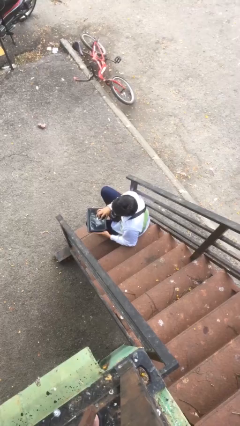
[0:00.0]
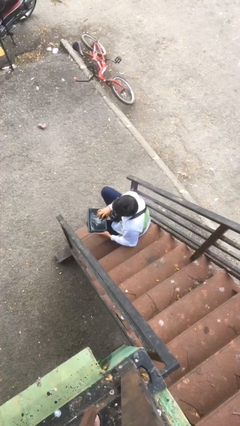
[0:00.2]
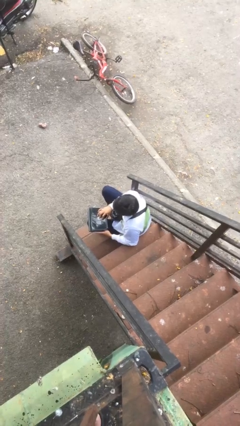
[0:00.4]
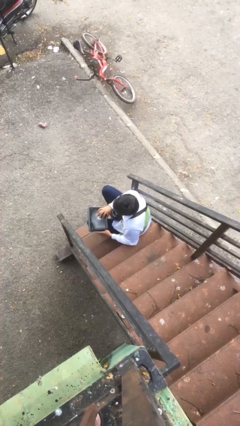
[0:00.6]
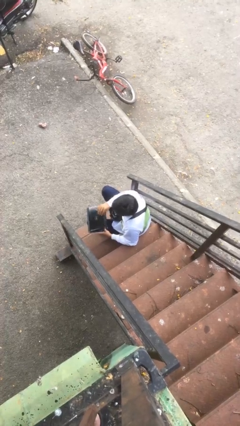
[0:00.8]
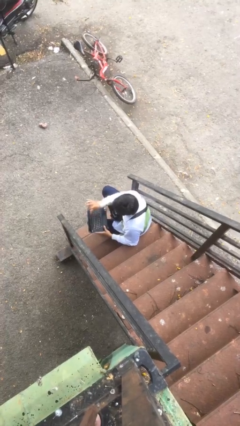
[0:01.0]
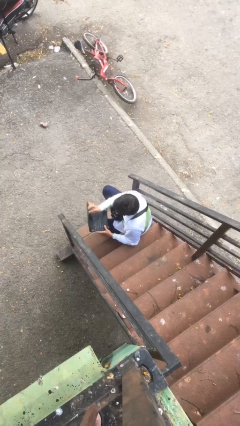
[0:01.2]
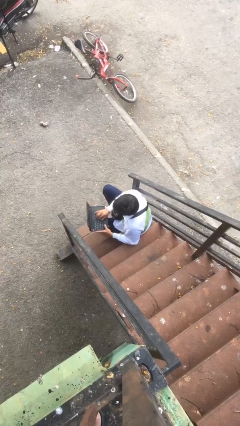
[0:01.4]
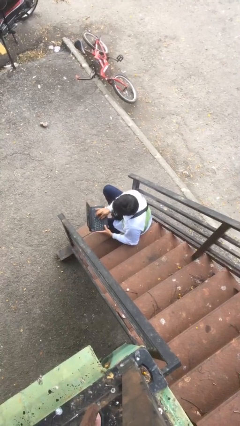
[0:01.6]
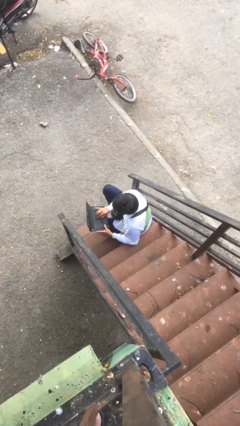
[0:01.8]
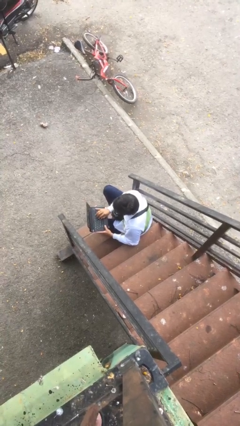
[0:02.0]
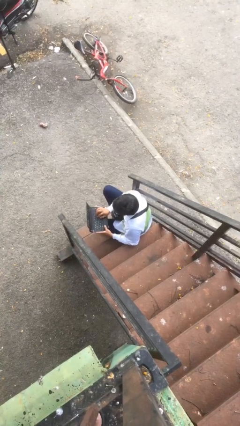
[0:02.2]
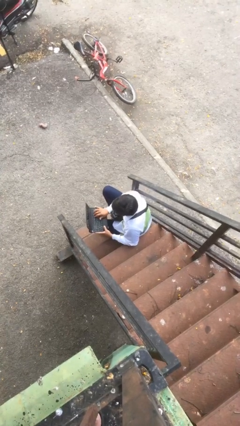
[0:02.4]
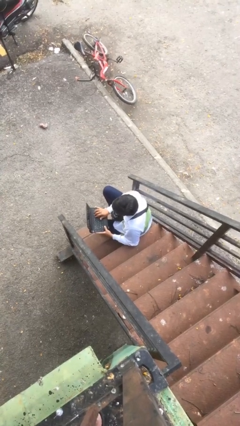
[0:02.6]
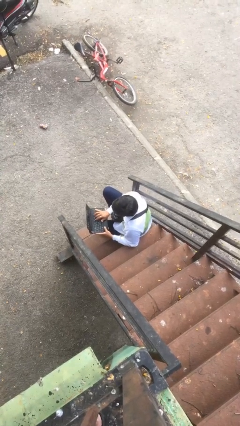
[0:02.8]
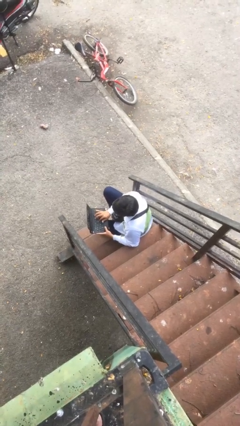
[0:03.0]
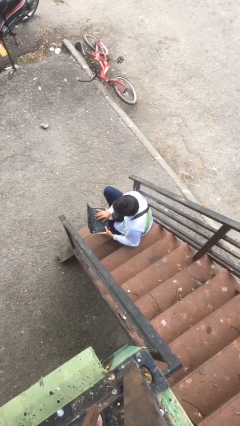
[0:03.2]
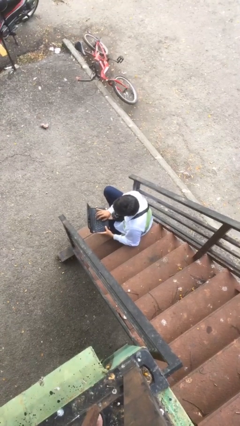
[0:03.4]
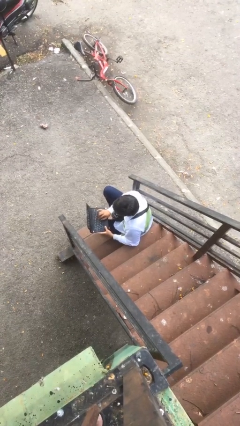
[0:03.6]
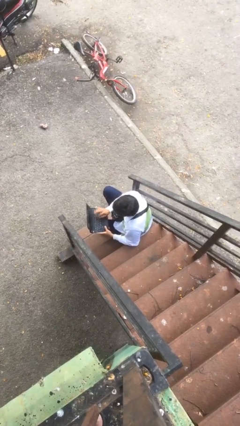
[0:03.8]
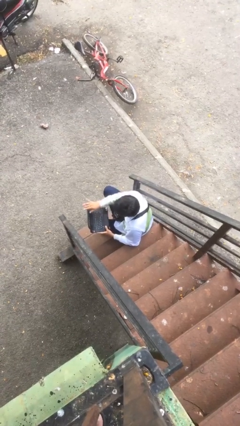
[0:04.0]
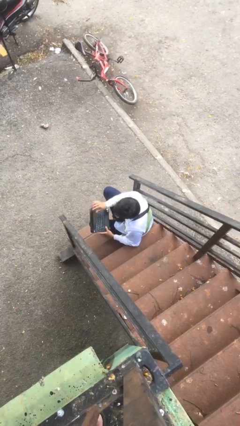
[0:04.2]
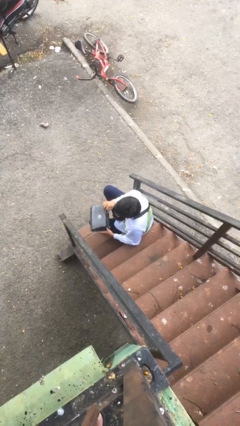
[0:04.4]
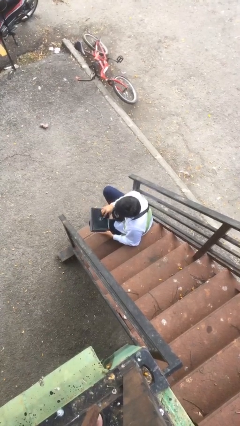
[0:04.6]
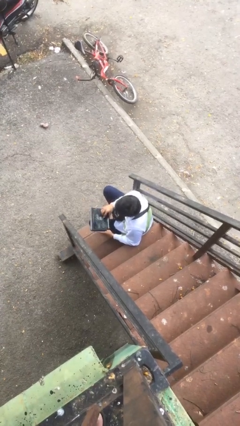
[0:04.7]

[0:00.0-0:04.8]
person interacts with laptop

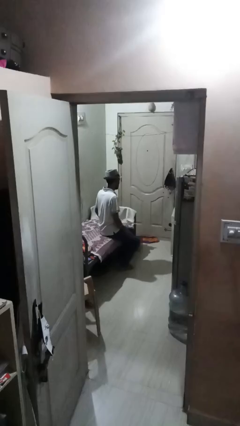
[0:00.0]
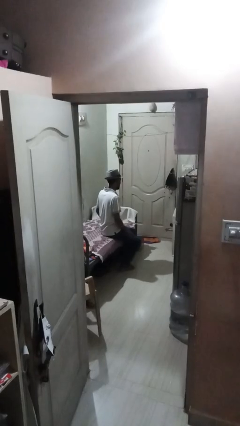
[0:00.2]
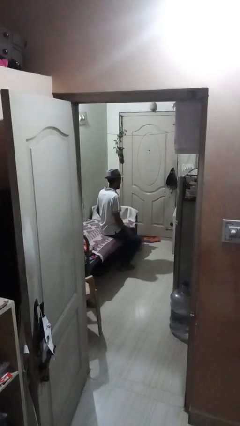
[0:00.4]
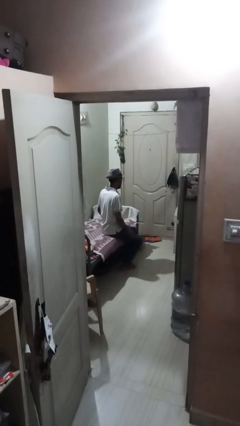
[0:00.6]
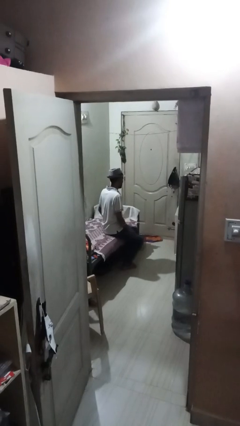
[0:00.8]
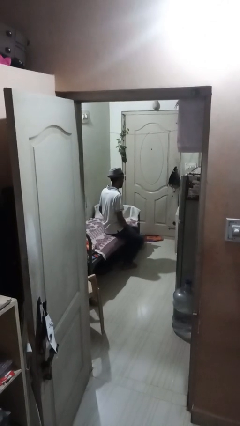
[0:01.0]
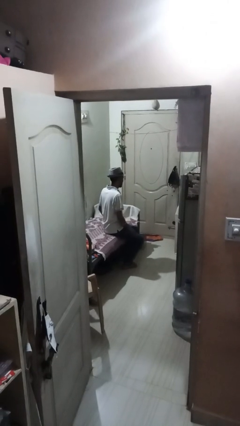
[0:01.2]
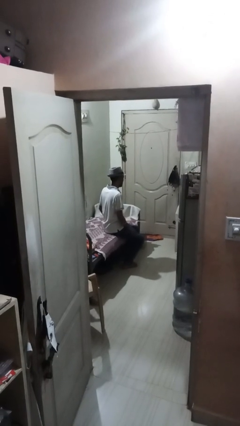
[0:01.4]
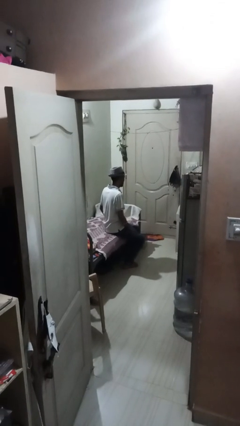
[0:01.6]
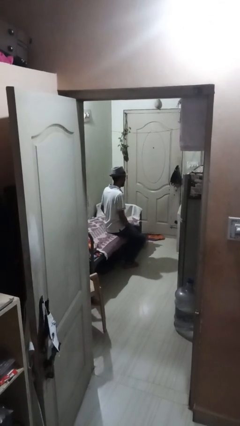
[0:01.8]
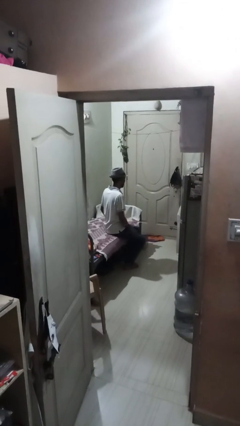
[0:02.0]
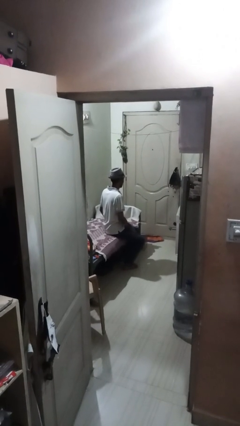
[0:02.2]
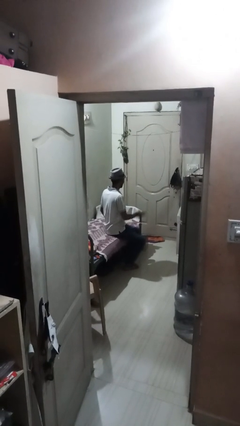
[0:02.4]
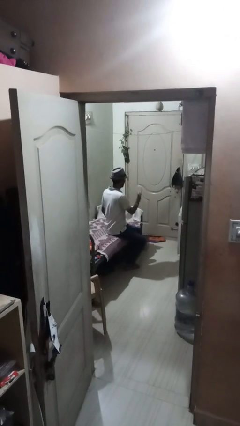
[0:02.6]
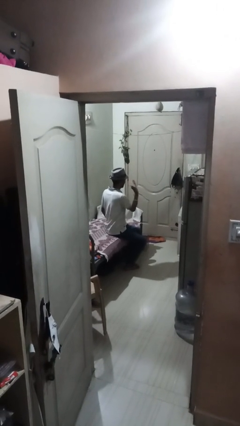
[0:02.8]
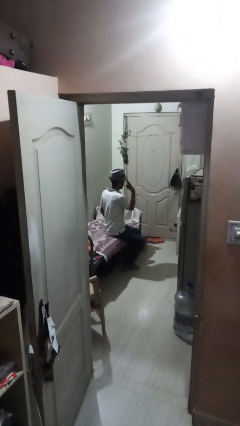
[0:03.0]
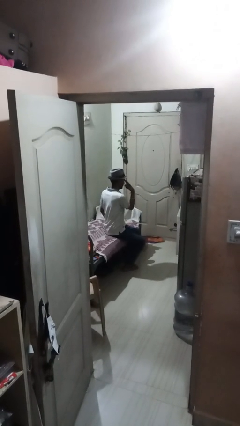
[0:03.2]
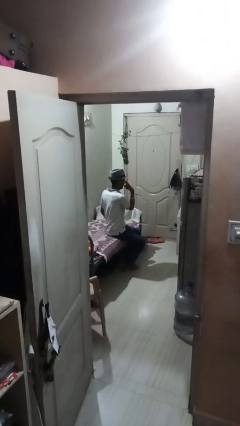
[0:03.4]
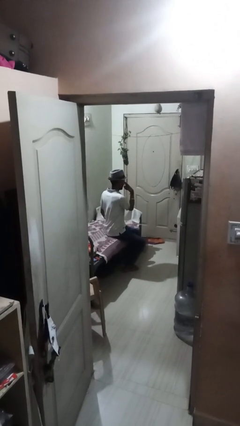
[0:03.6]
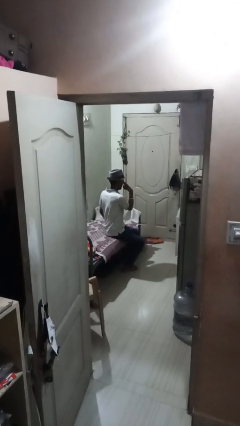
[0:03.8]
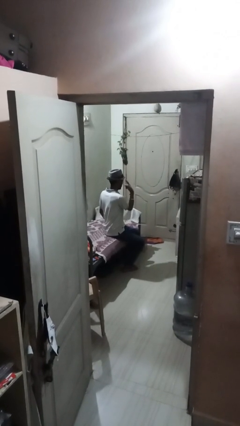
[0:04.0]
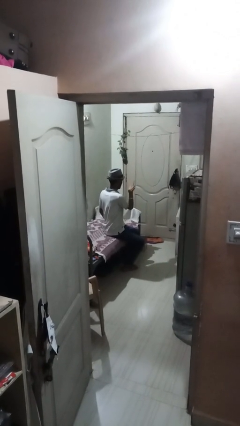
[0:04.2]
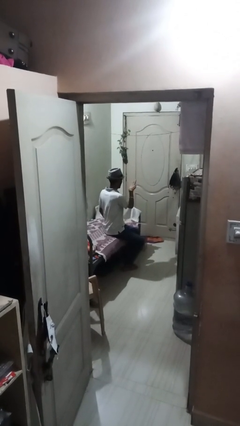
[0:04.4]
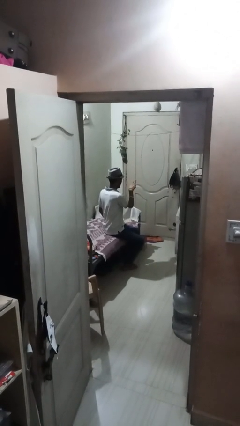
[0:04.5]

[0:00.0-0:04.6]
person gestures watch closely

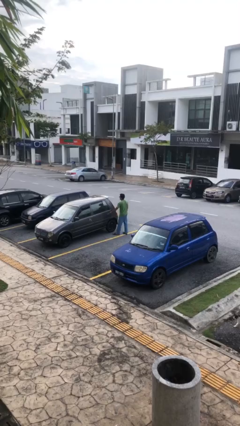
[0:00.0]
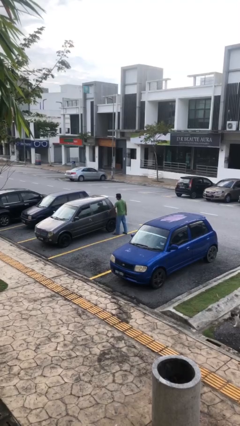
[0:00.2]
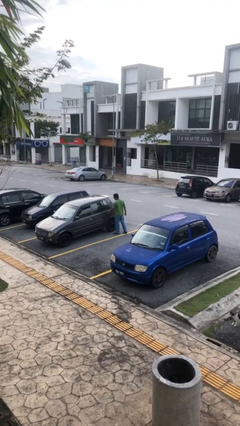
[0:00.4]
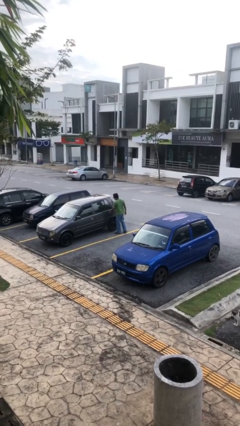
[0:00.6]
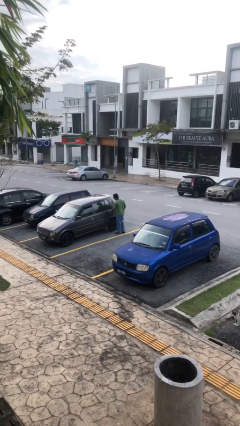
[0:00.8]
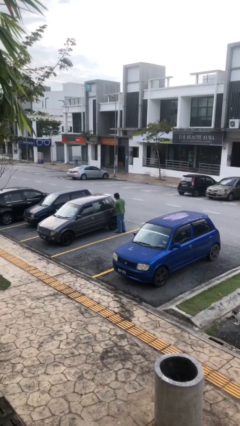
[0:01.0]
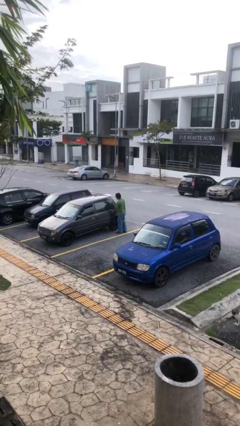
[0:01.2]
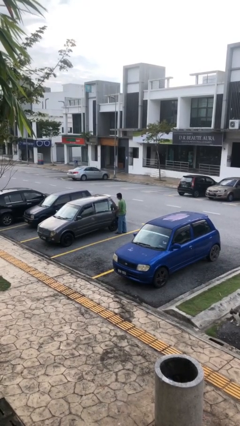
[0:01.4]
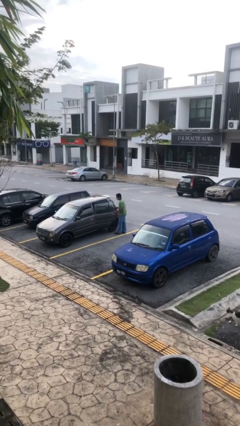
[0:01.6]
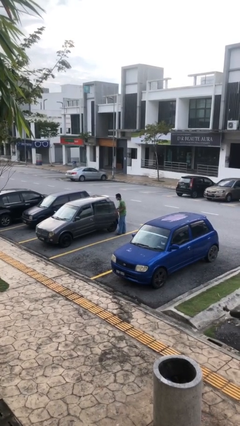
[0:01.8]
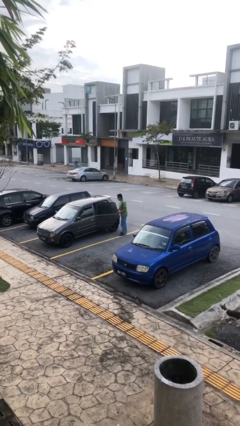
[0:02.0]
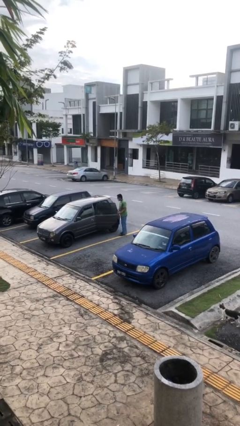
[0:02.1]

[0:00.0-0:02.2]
person opens car door

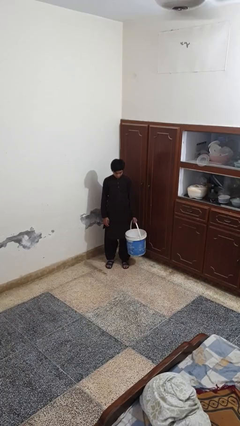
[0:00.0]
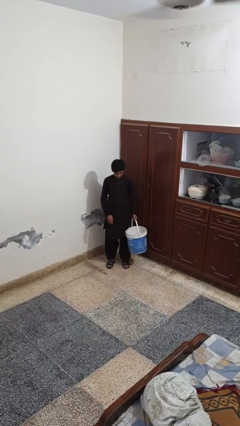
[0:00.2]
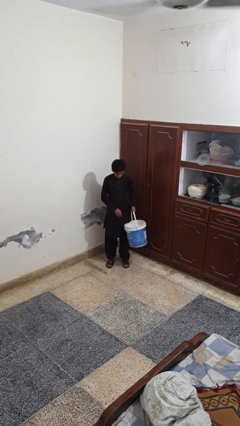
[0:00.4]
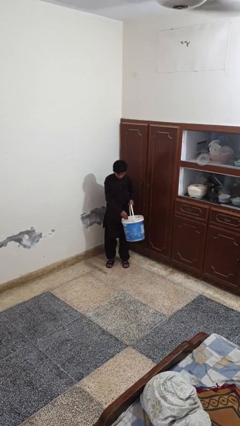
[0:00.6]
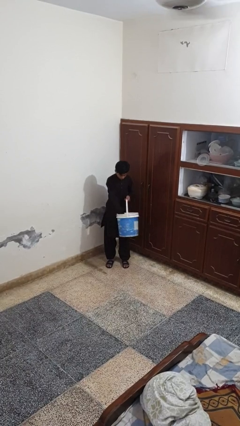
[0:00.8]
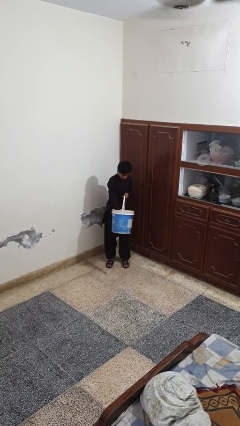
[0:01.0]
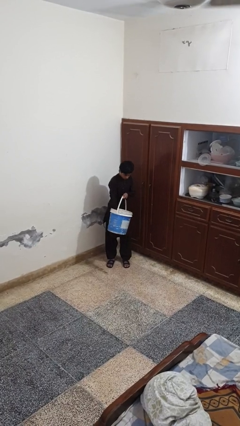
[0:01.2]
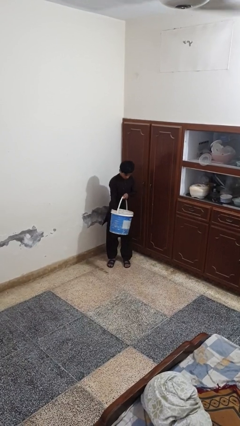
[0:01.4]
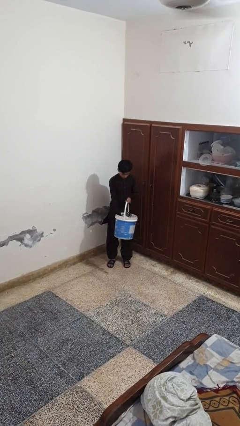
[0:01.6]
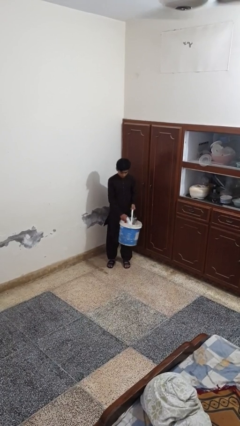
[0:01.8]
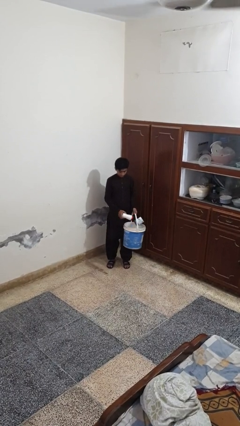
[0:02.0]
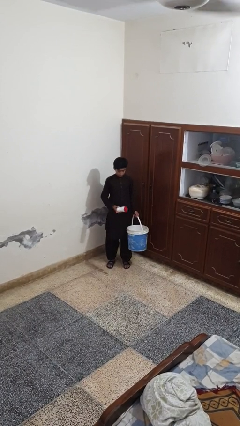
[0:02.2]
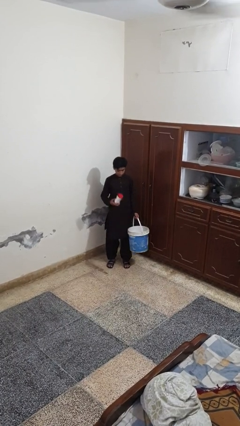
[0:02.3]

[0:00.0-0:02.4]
person takes object from basket

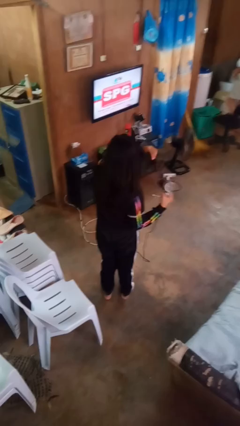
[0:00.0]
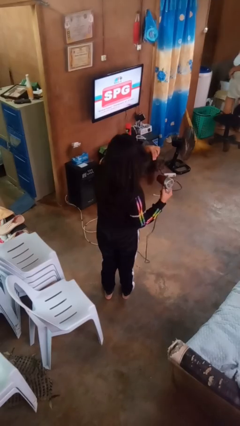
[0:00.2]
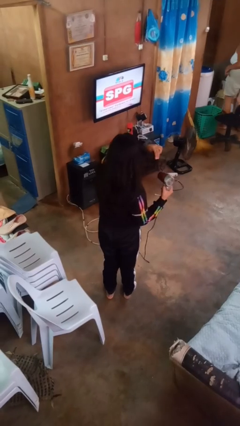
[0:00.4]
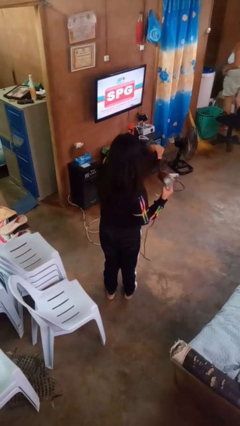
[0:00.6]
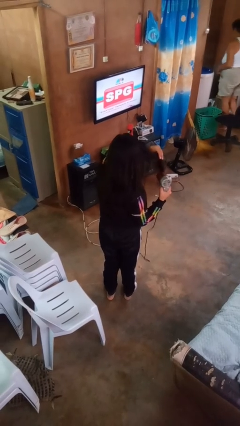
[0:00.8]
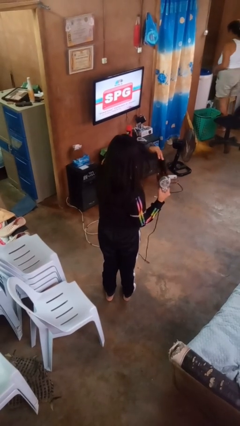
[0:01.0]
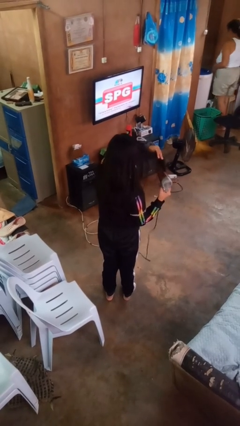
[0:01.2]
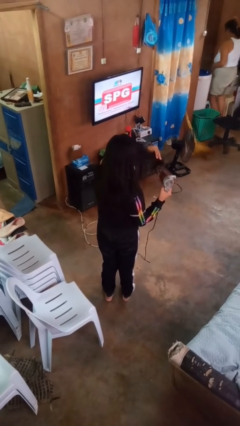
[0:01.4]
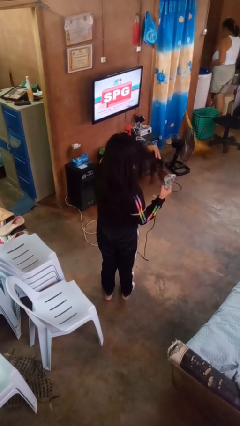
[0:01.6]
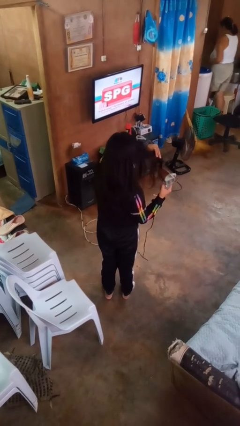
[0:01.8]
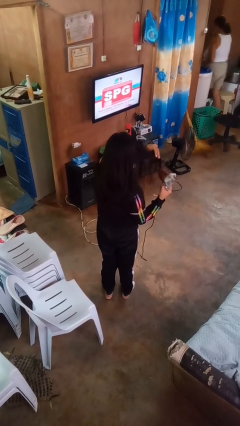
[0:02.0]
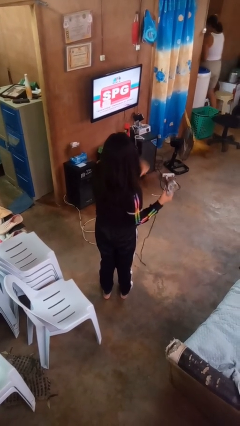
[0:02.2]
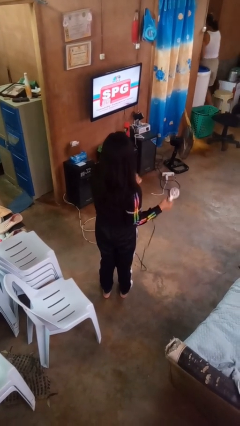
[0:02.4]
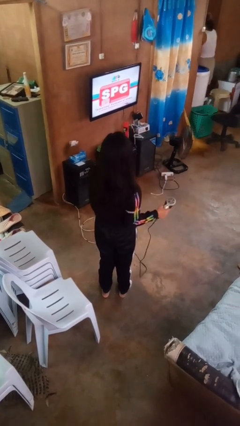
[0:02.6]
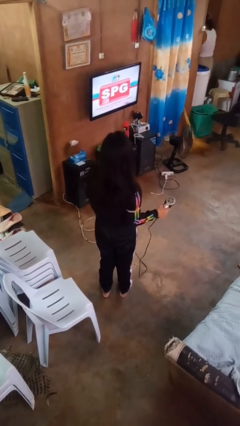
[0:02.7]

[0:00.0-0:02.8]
person dries hair with hairdryer

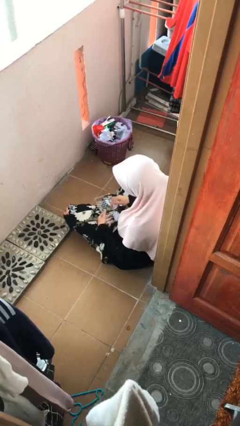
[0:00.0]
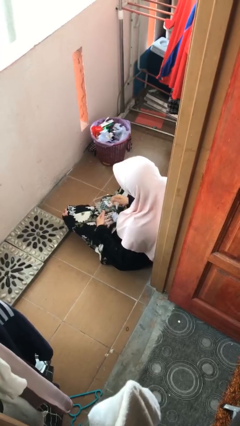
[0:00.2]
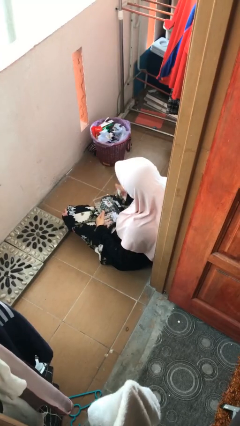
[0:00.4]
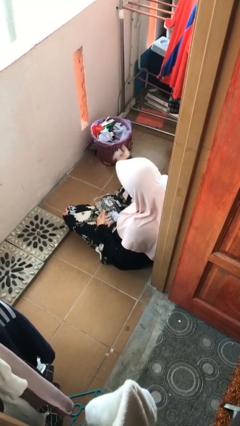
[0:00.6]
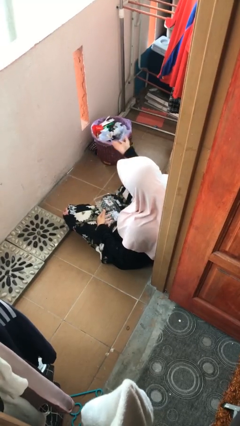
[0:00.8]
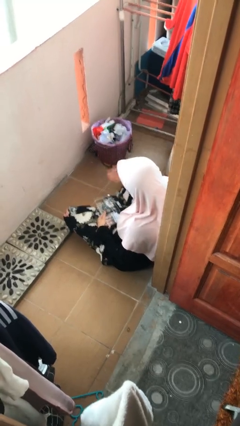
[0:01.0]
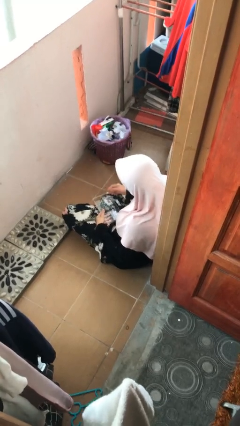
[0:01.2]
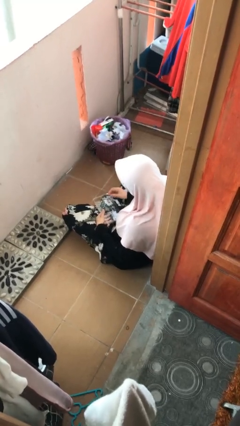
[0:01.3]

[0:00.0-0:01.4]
person discards trash
